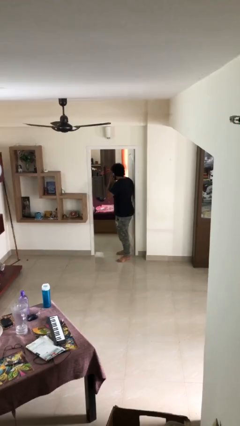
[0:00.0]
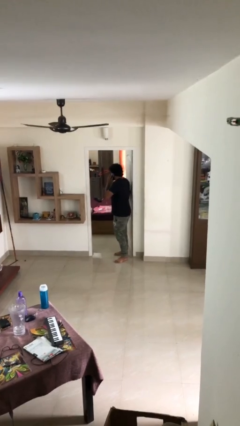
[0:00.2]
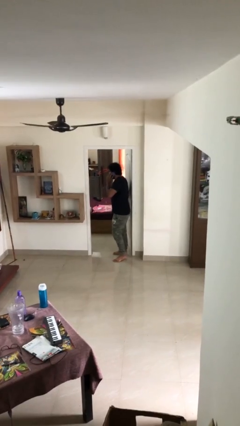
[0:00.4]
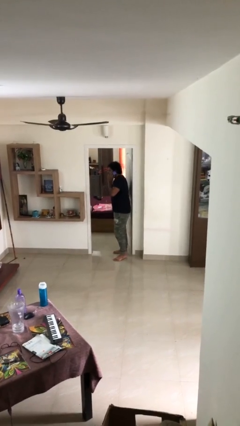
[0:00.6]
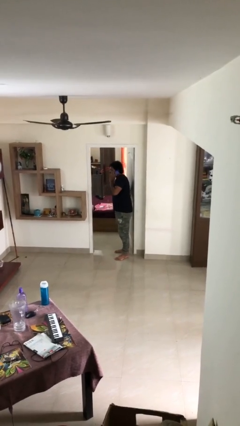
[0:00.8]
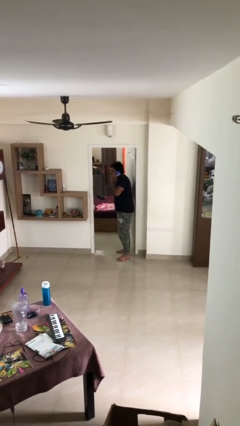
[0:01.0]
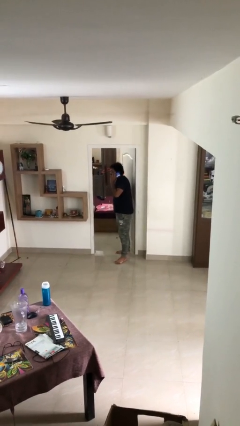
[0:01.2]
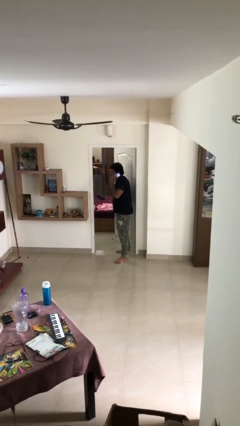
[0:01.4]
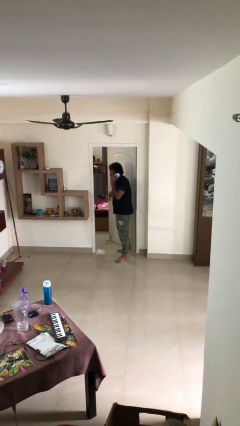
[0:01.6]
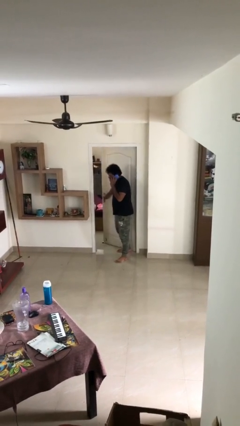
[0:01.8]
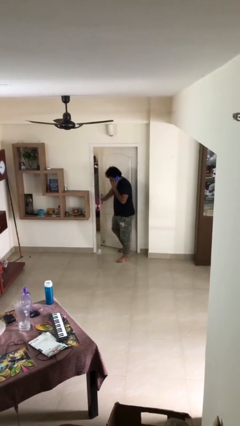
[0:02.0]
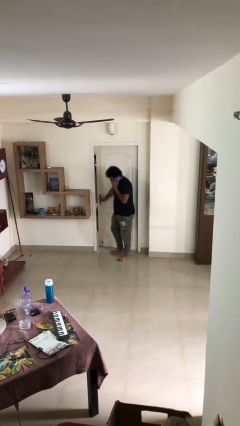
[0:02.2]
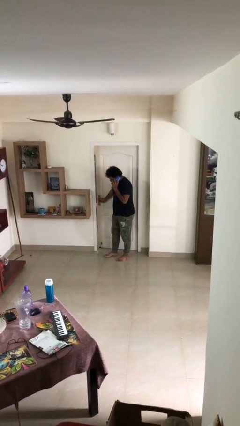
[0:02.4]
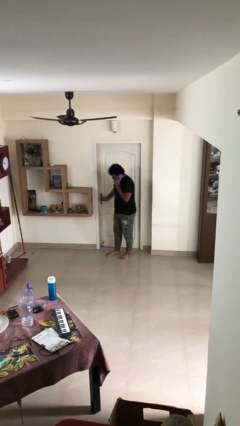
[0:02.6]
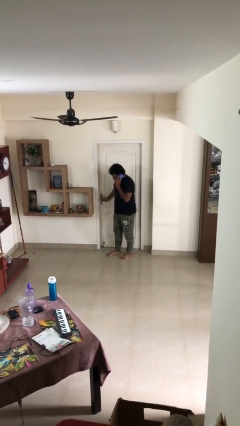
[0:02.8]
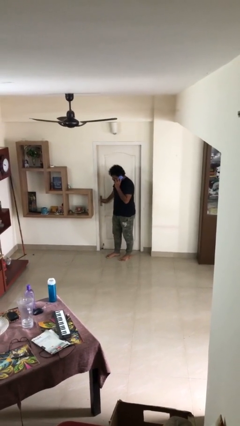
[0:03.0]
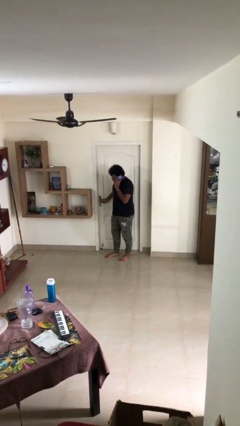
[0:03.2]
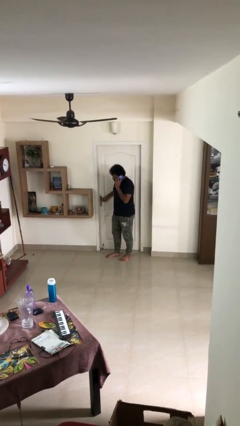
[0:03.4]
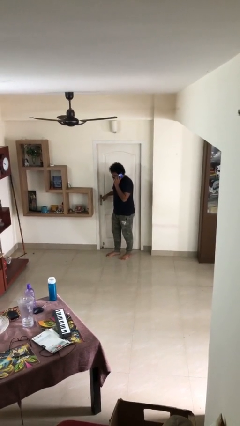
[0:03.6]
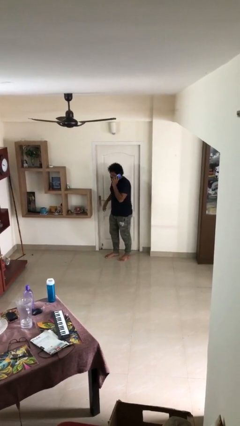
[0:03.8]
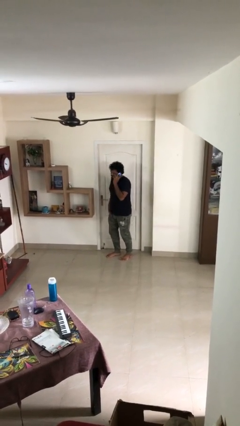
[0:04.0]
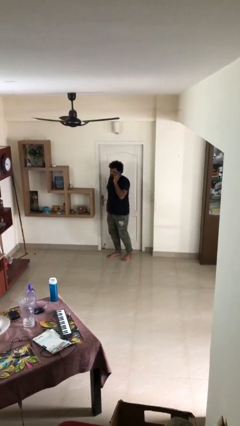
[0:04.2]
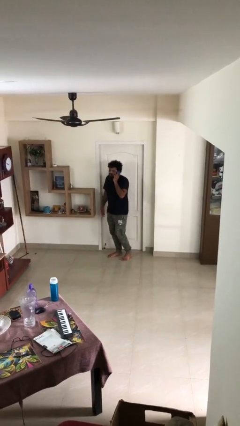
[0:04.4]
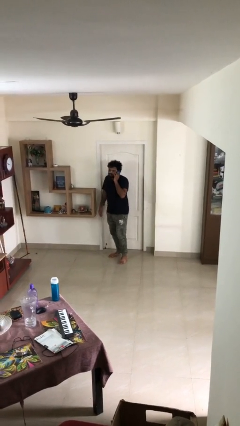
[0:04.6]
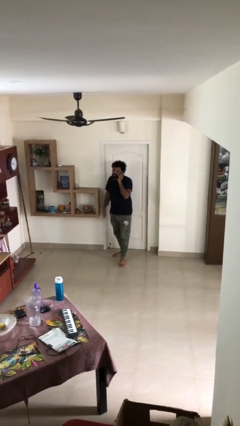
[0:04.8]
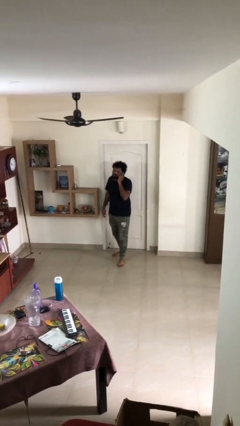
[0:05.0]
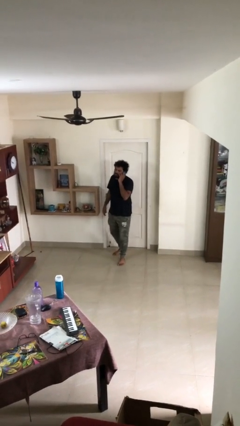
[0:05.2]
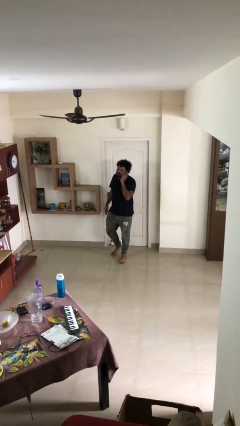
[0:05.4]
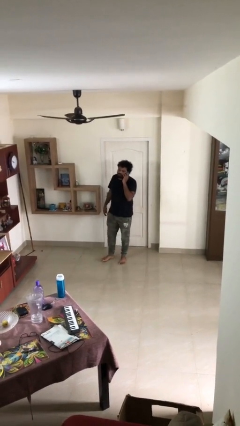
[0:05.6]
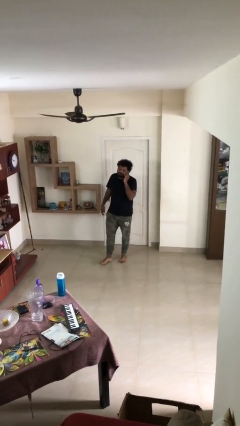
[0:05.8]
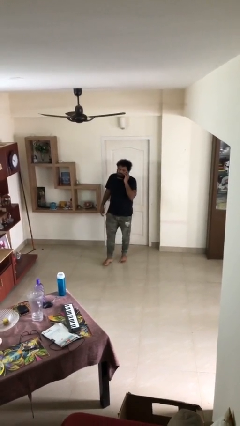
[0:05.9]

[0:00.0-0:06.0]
person closes facility door

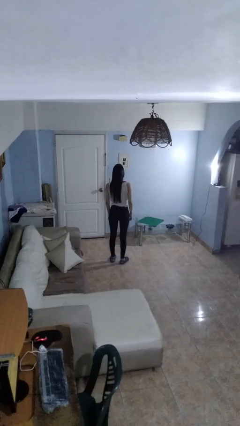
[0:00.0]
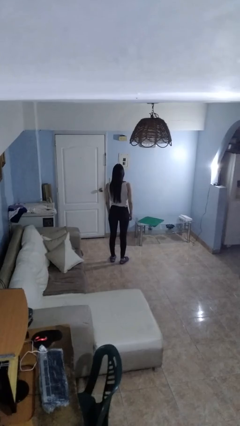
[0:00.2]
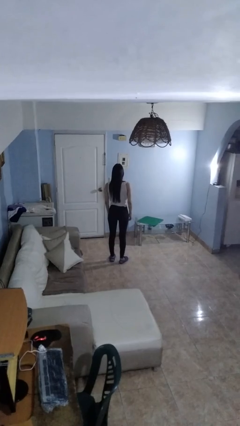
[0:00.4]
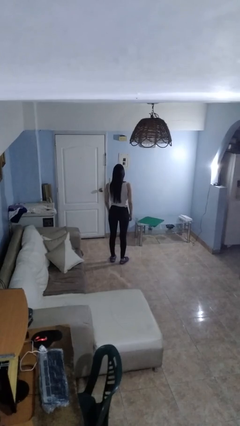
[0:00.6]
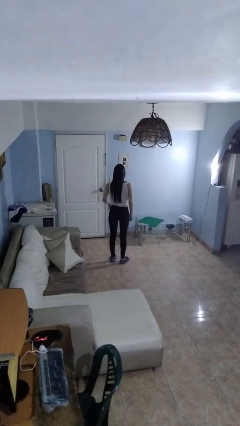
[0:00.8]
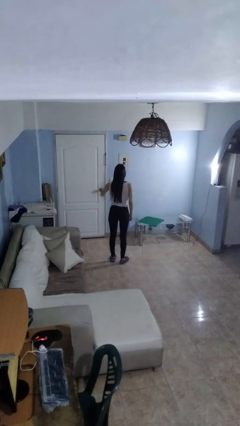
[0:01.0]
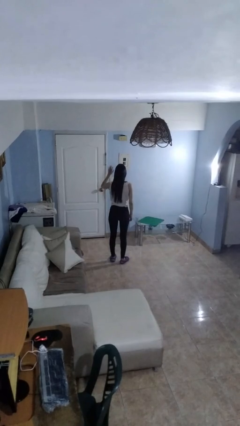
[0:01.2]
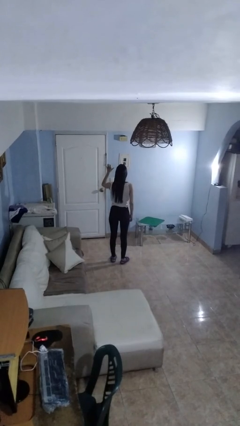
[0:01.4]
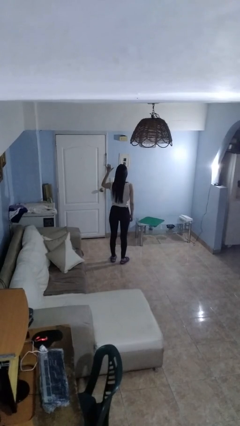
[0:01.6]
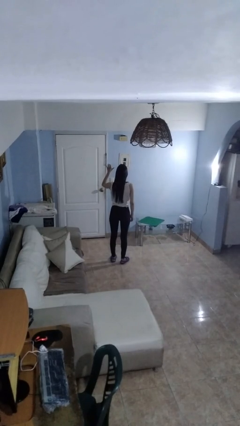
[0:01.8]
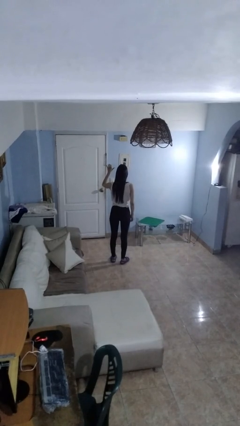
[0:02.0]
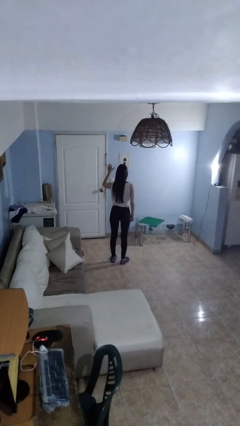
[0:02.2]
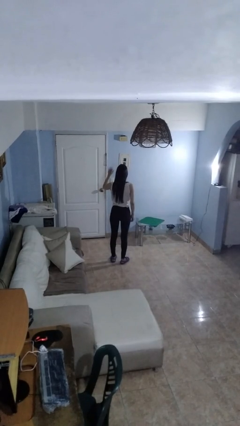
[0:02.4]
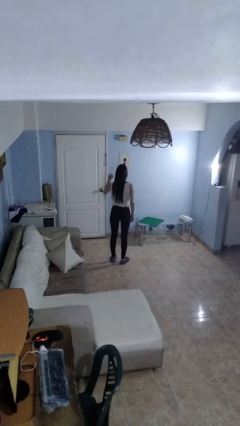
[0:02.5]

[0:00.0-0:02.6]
person gestures number five

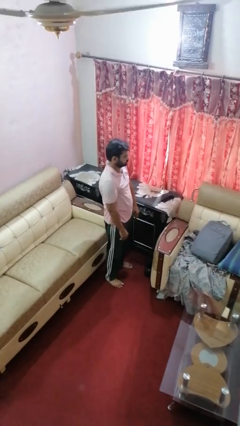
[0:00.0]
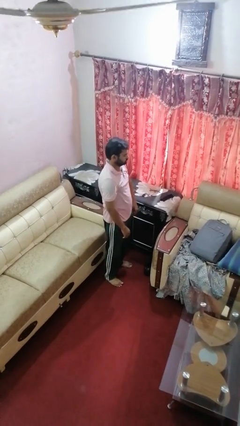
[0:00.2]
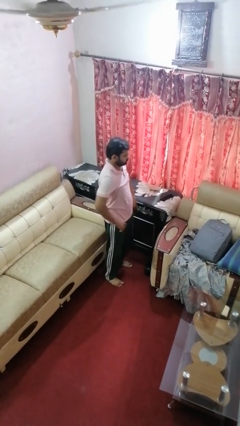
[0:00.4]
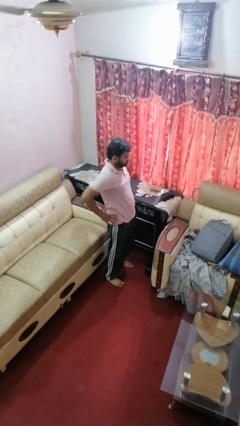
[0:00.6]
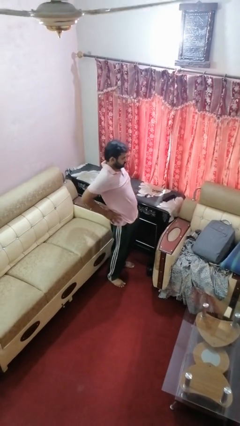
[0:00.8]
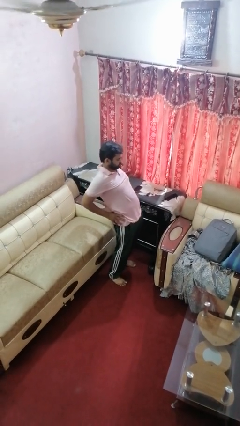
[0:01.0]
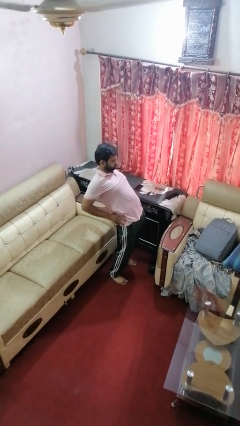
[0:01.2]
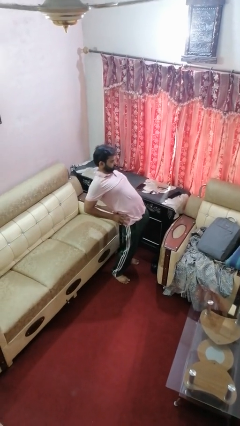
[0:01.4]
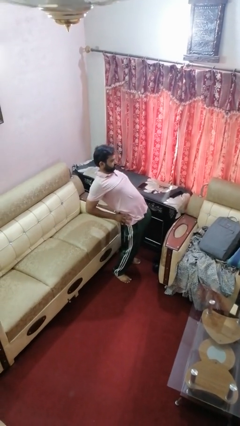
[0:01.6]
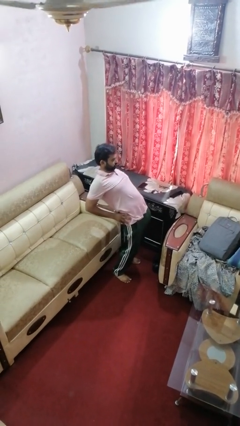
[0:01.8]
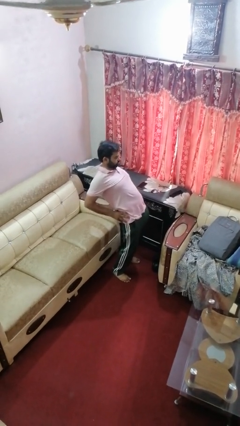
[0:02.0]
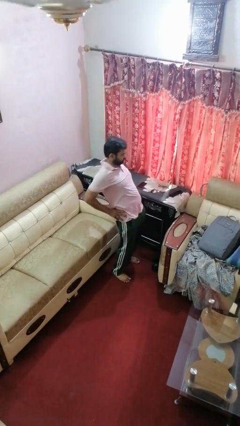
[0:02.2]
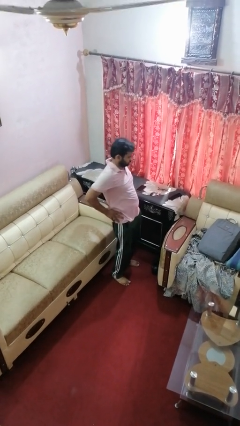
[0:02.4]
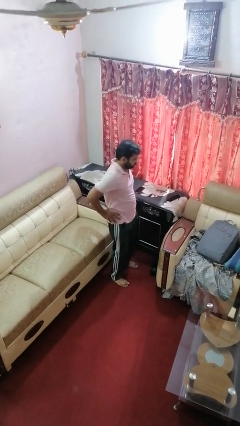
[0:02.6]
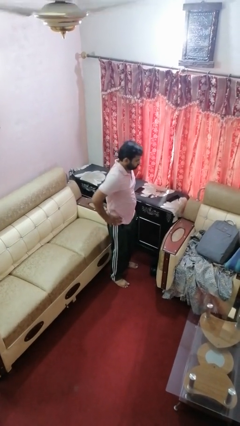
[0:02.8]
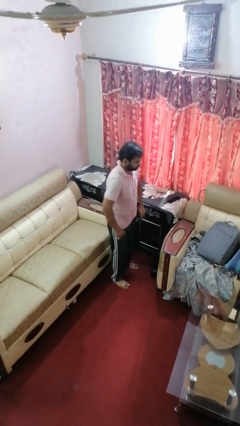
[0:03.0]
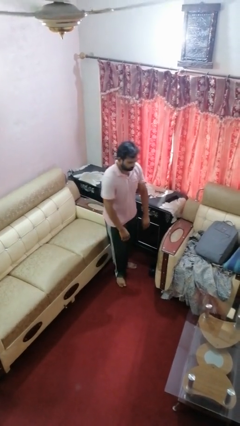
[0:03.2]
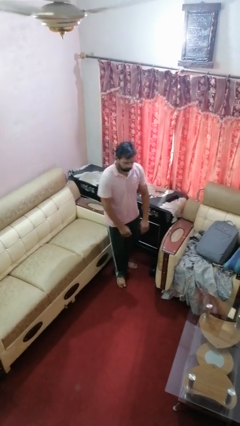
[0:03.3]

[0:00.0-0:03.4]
person stretches back

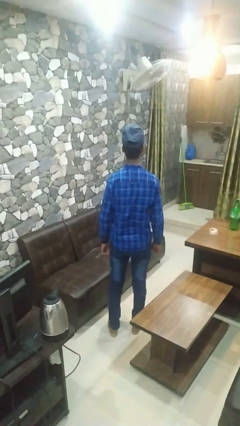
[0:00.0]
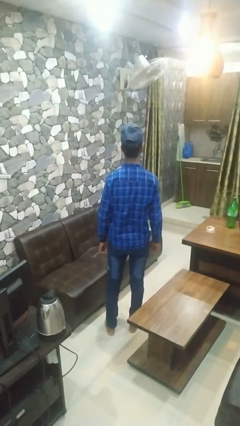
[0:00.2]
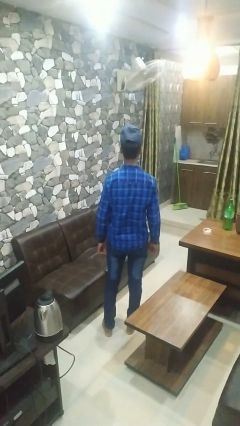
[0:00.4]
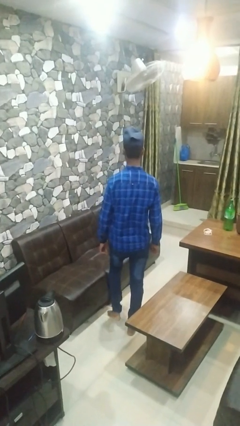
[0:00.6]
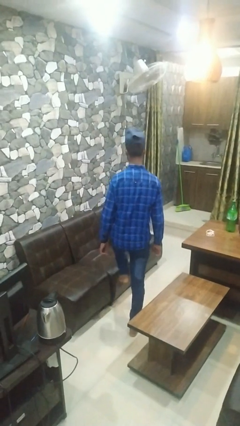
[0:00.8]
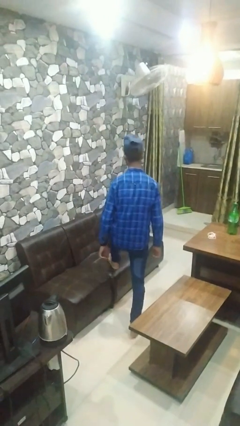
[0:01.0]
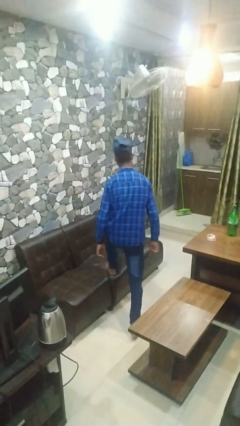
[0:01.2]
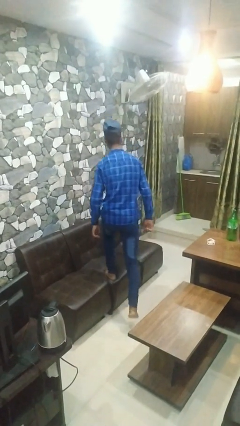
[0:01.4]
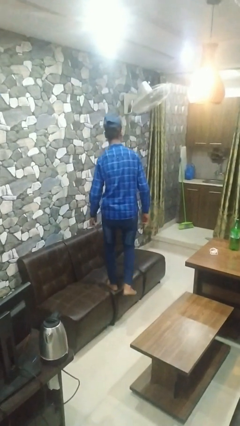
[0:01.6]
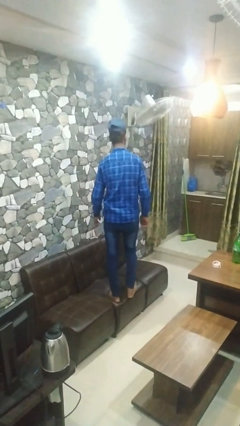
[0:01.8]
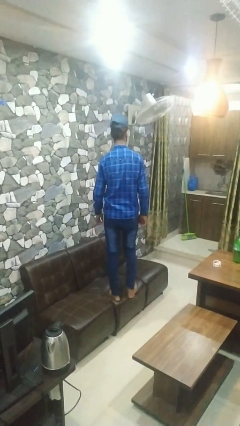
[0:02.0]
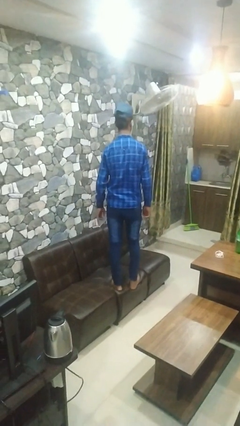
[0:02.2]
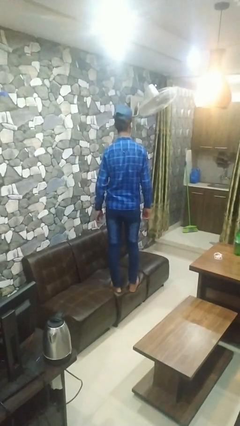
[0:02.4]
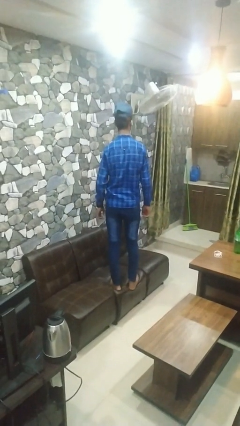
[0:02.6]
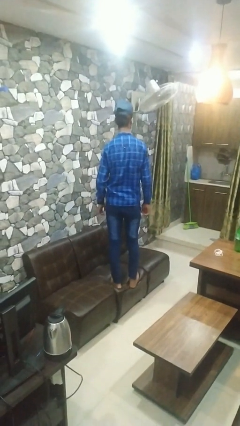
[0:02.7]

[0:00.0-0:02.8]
person climbs on couch

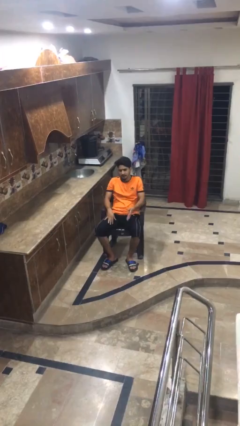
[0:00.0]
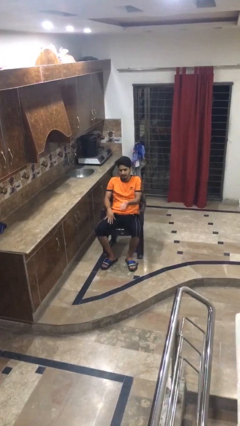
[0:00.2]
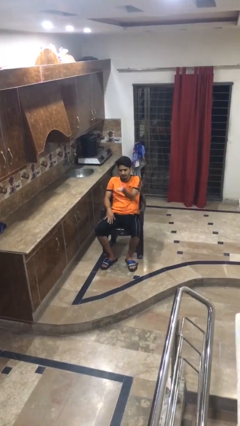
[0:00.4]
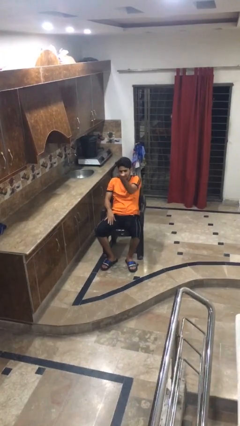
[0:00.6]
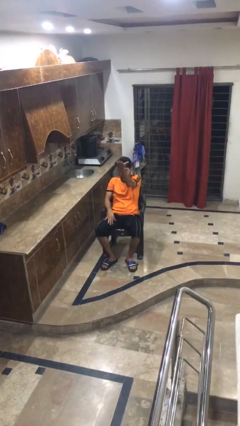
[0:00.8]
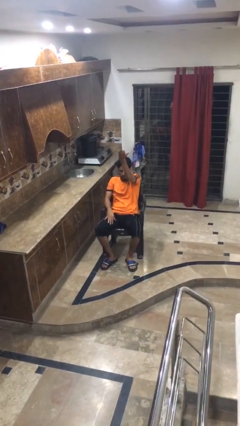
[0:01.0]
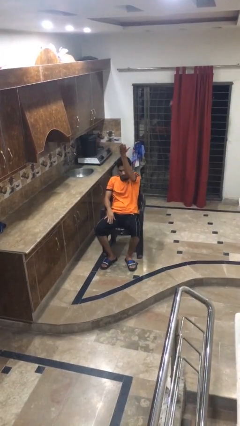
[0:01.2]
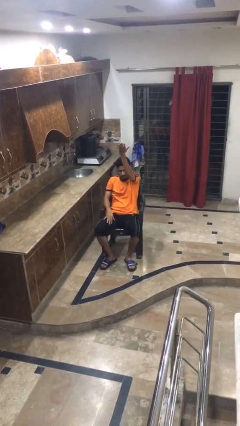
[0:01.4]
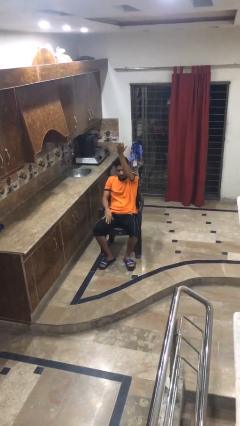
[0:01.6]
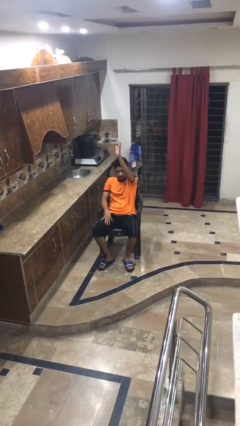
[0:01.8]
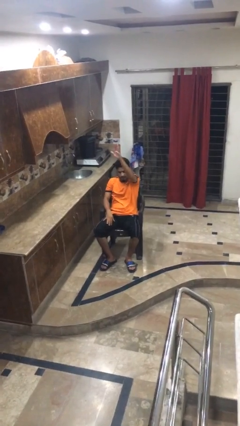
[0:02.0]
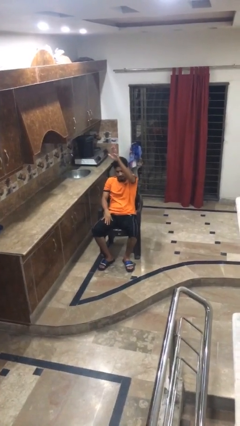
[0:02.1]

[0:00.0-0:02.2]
person gestures swipe up

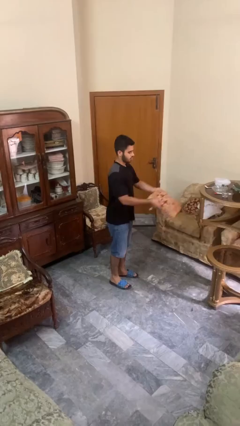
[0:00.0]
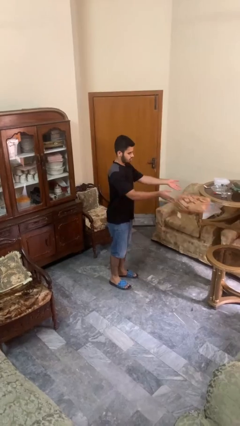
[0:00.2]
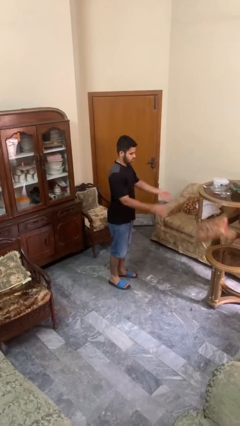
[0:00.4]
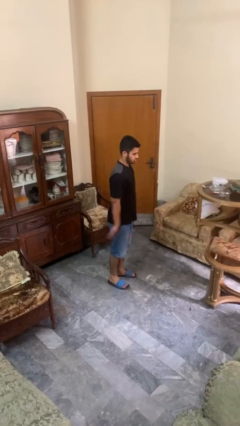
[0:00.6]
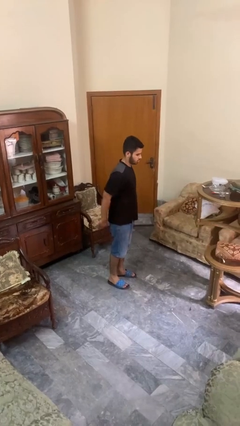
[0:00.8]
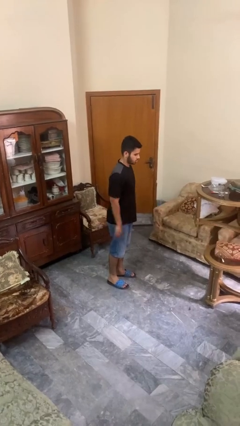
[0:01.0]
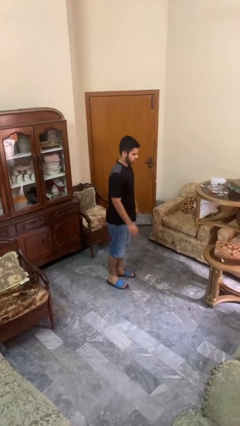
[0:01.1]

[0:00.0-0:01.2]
person throws object on table
